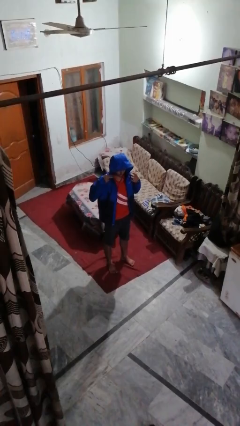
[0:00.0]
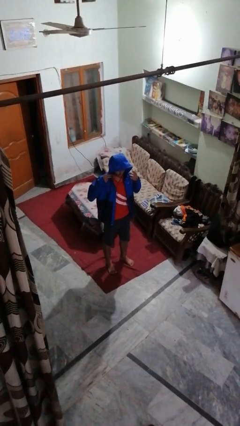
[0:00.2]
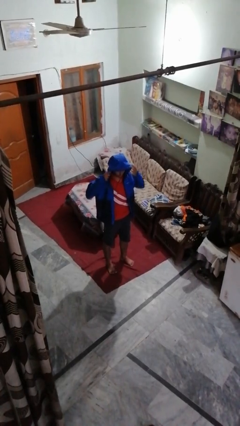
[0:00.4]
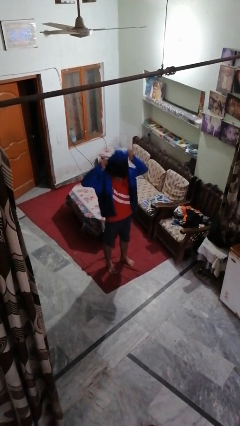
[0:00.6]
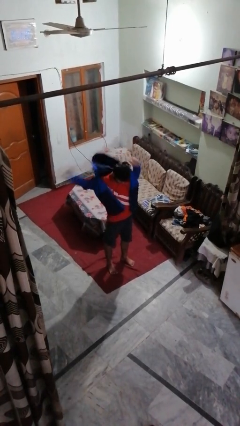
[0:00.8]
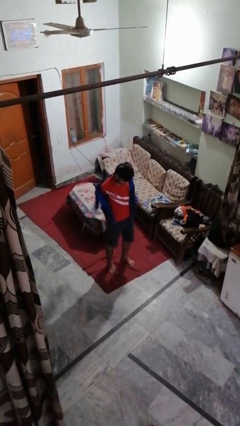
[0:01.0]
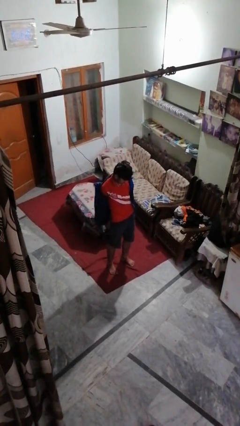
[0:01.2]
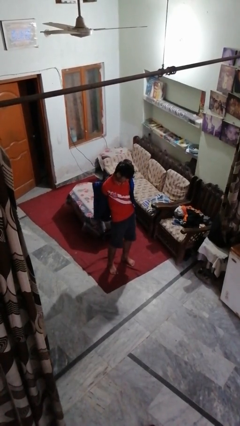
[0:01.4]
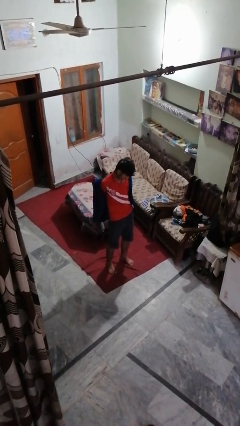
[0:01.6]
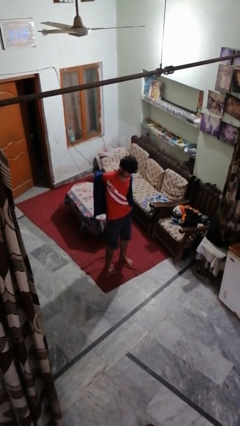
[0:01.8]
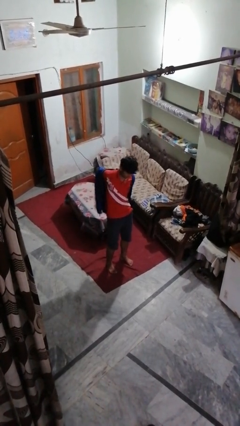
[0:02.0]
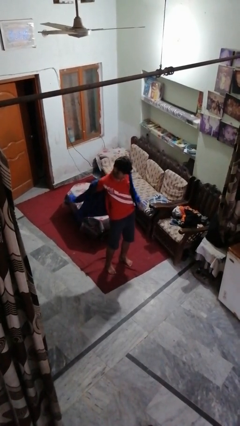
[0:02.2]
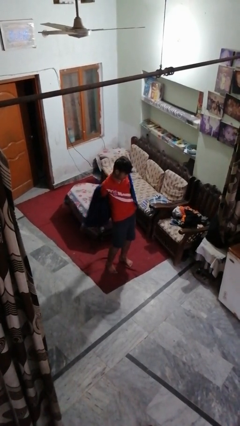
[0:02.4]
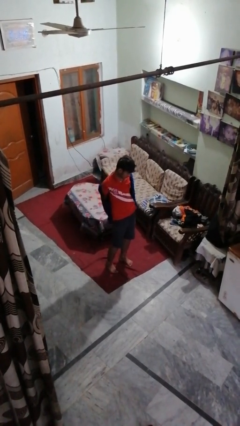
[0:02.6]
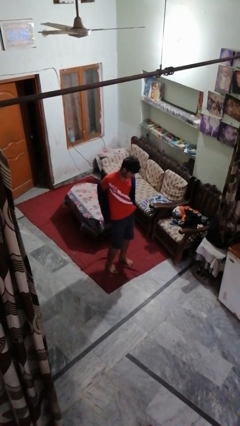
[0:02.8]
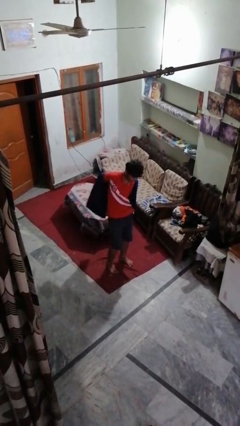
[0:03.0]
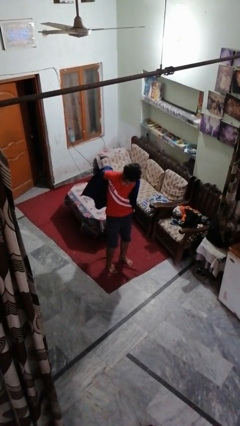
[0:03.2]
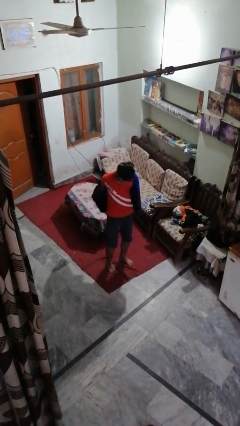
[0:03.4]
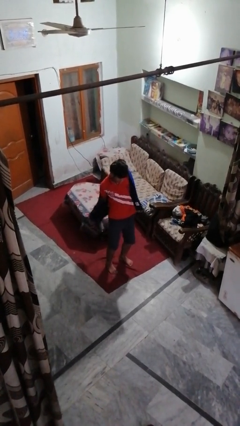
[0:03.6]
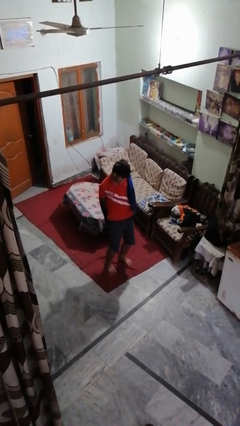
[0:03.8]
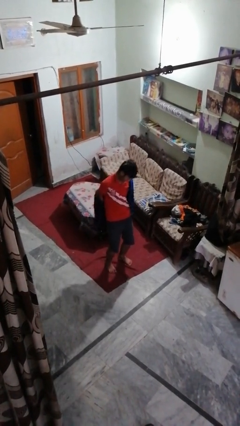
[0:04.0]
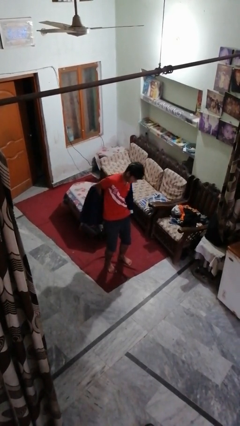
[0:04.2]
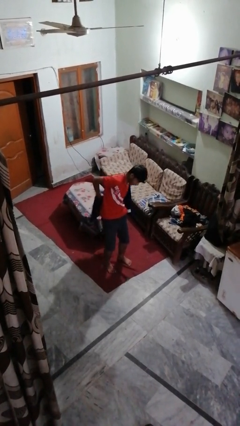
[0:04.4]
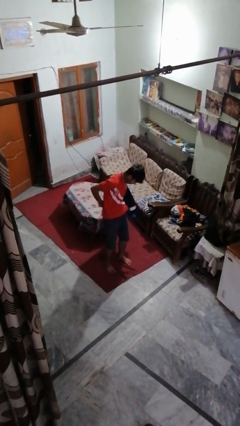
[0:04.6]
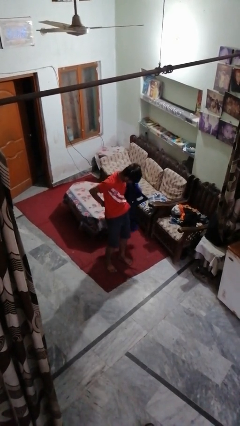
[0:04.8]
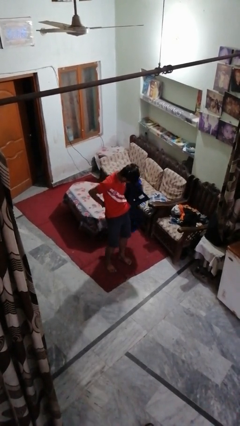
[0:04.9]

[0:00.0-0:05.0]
person takes off hoodie

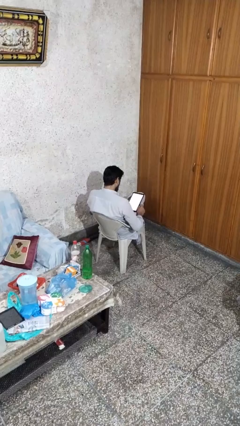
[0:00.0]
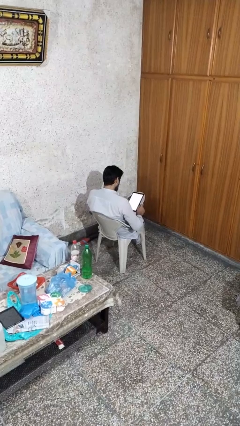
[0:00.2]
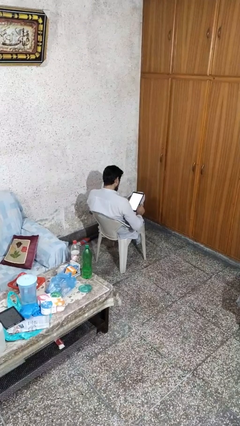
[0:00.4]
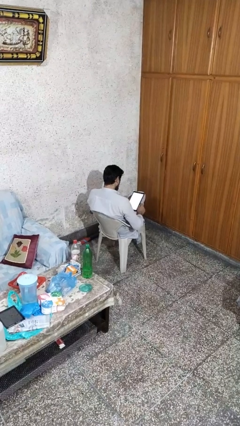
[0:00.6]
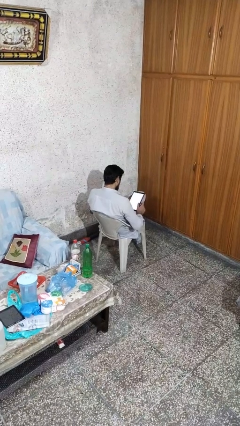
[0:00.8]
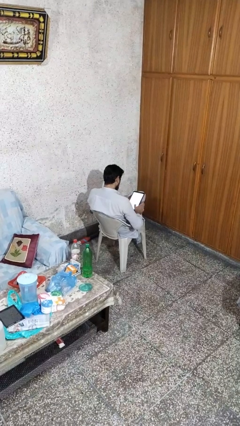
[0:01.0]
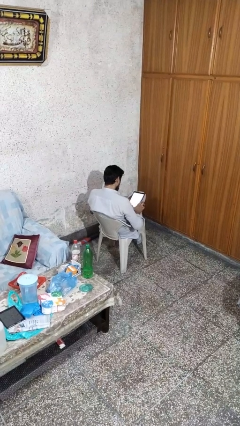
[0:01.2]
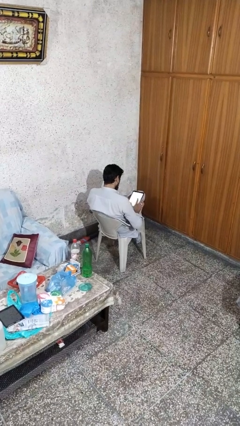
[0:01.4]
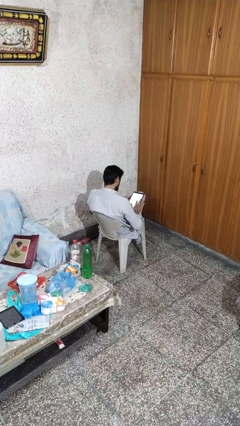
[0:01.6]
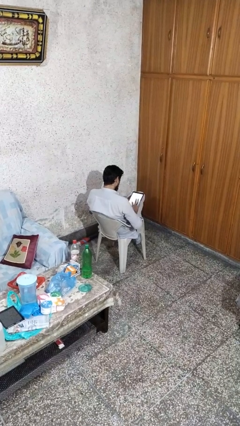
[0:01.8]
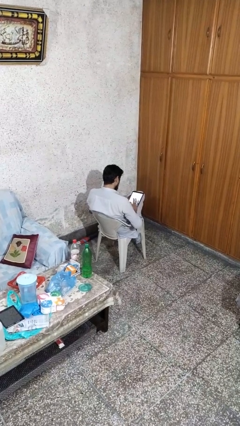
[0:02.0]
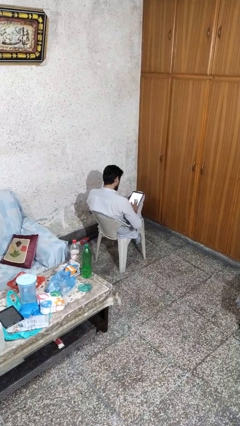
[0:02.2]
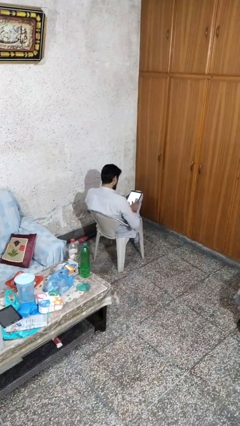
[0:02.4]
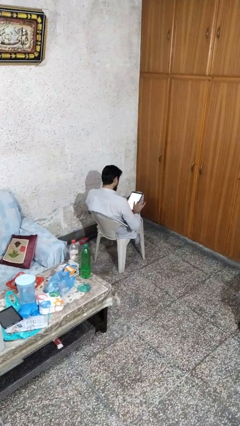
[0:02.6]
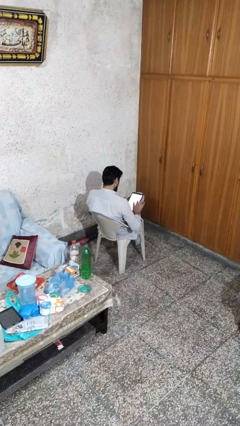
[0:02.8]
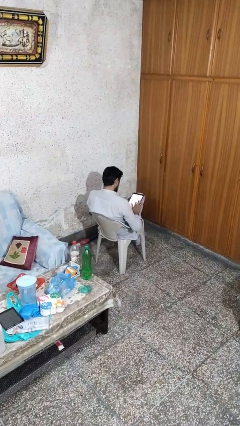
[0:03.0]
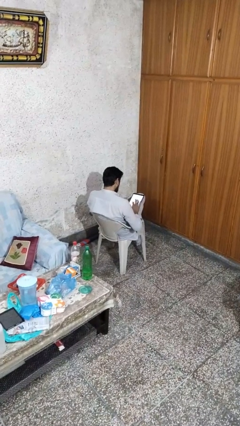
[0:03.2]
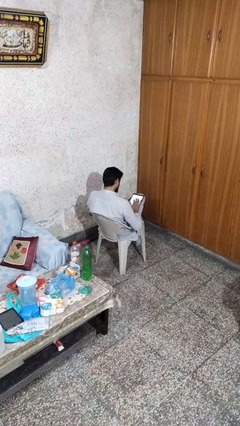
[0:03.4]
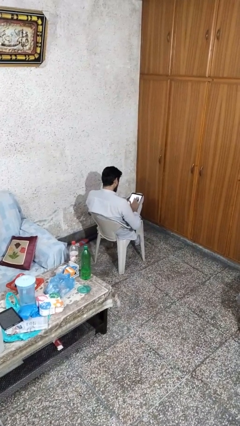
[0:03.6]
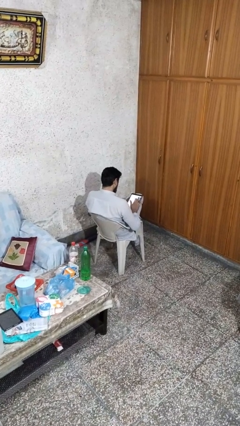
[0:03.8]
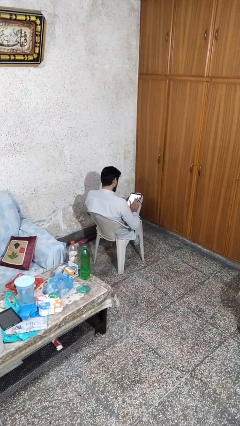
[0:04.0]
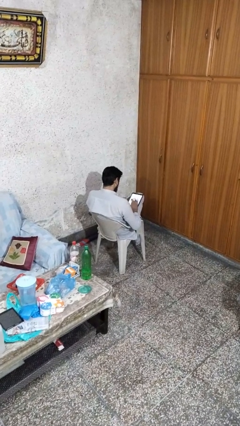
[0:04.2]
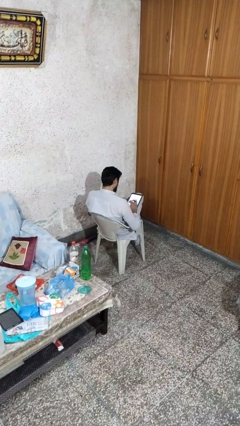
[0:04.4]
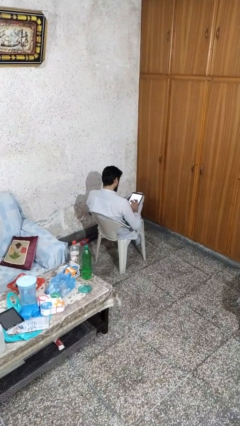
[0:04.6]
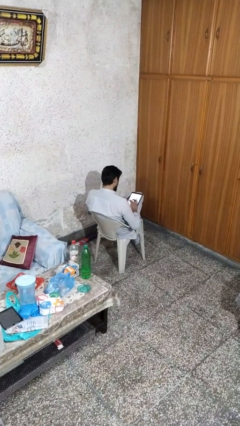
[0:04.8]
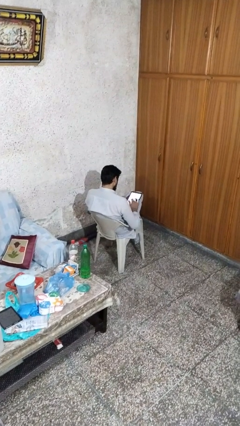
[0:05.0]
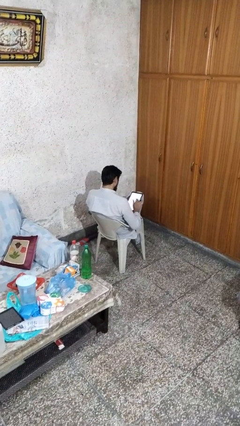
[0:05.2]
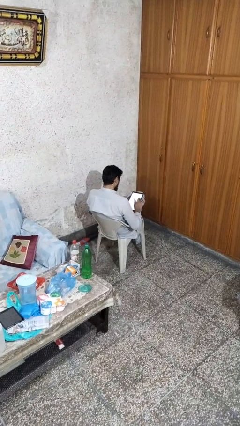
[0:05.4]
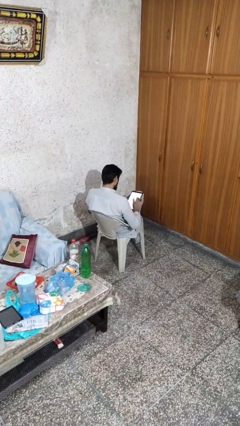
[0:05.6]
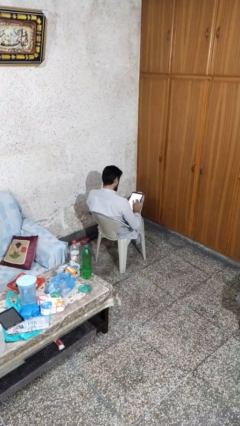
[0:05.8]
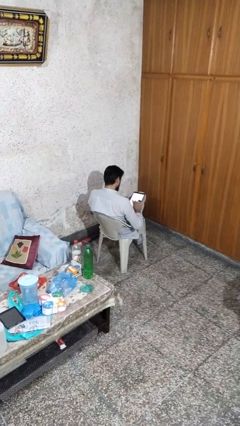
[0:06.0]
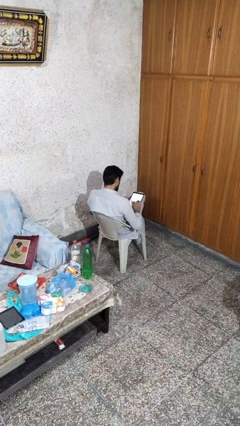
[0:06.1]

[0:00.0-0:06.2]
person interacts with tablet

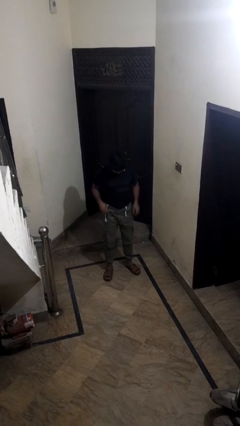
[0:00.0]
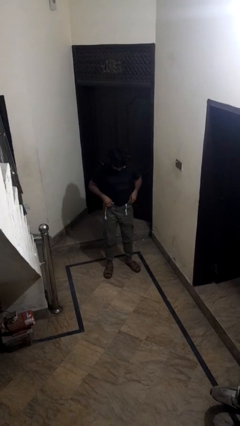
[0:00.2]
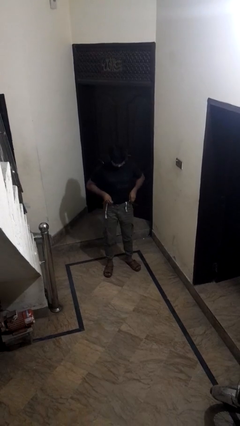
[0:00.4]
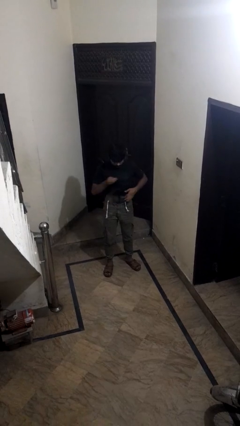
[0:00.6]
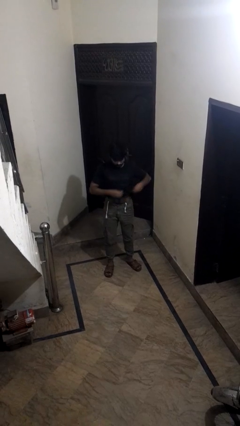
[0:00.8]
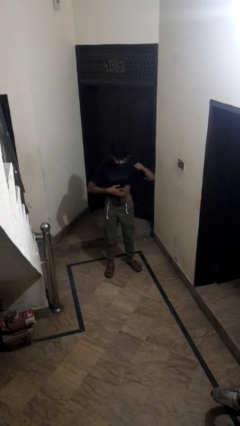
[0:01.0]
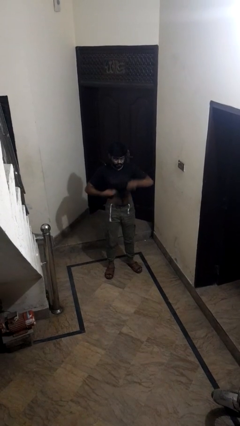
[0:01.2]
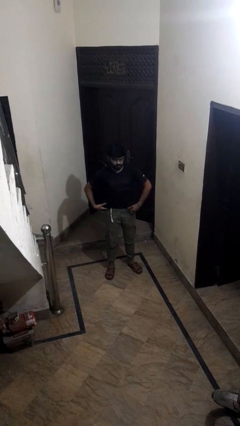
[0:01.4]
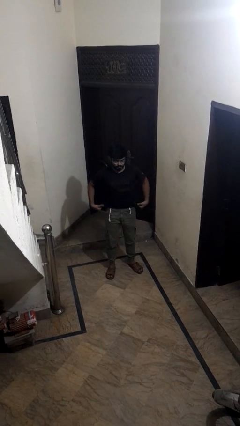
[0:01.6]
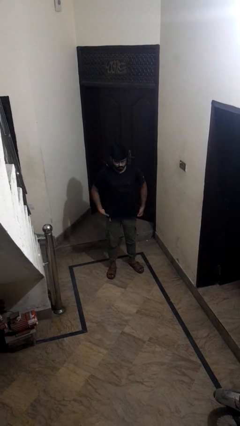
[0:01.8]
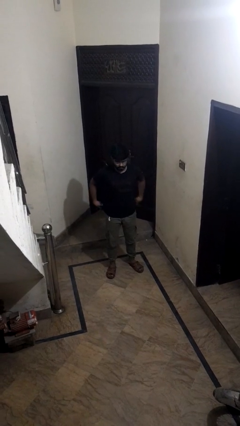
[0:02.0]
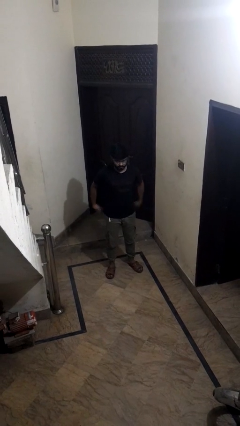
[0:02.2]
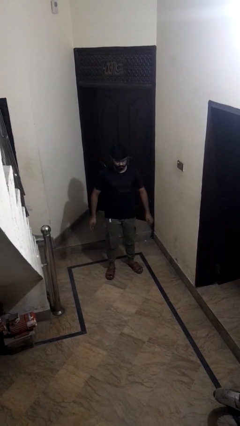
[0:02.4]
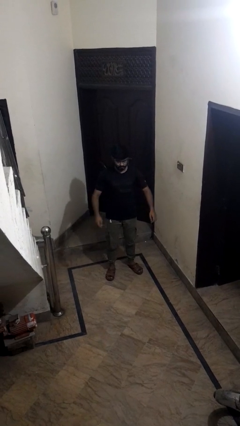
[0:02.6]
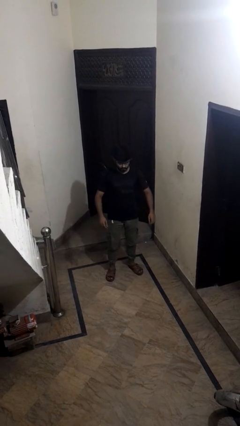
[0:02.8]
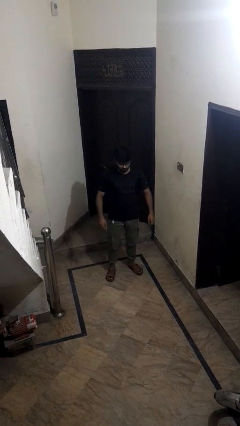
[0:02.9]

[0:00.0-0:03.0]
person untucks shirt

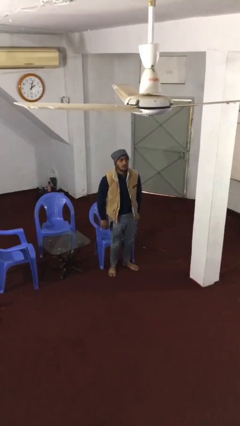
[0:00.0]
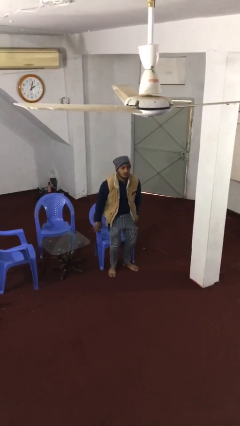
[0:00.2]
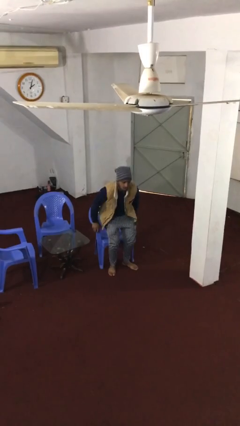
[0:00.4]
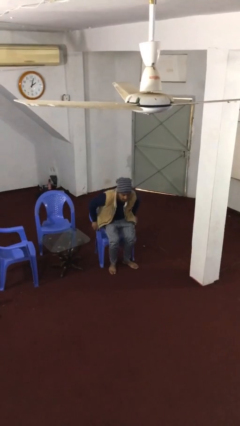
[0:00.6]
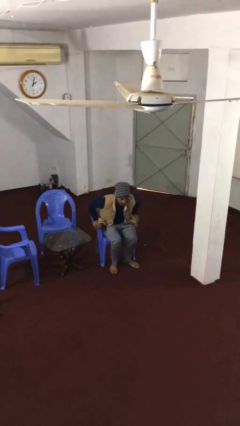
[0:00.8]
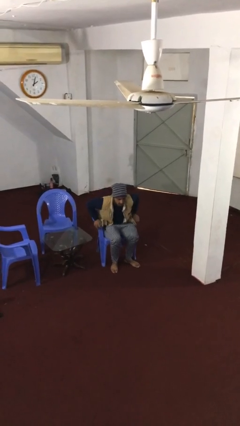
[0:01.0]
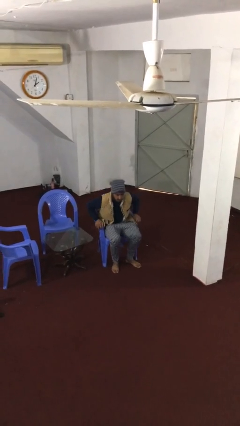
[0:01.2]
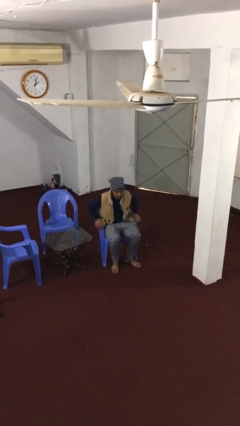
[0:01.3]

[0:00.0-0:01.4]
person sits down

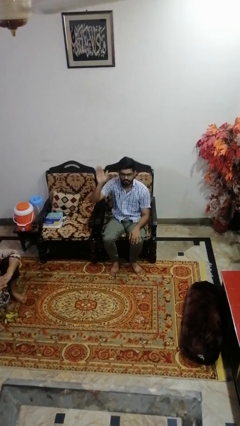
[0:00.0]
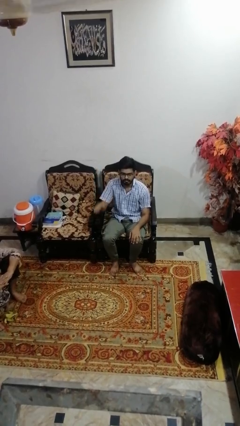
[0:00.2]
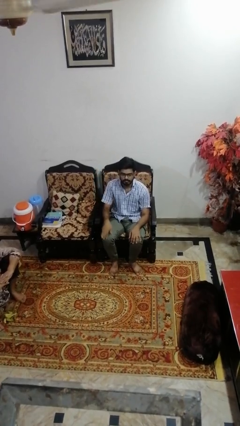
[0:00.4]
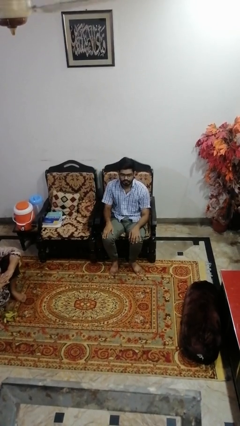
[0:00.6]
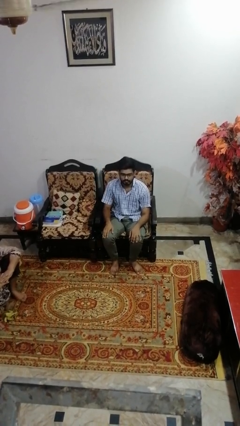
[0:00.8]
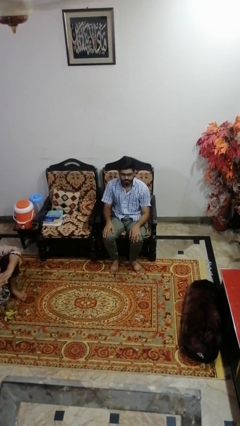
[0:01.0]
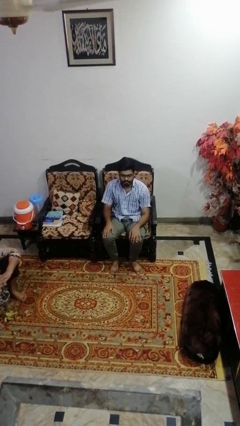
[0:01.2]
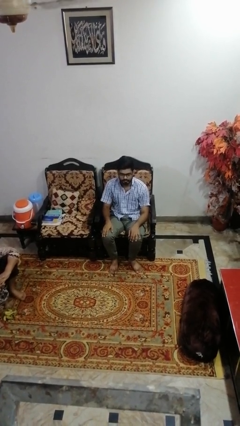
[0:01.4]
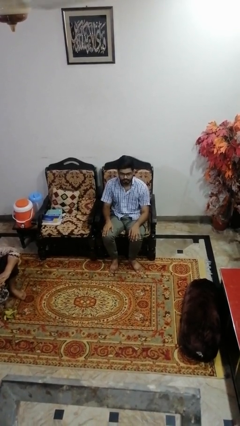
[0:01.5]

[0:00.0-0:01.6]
person gestures lower hand

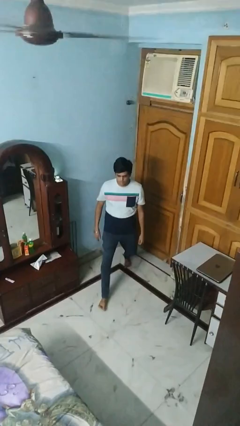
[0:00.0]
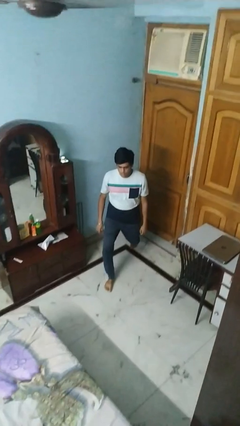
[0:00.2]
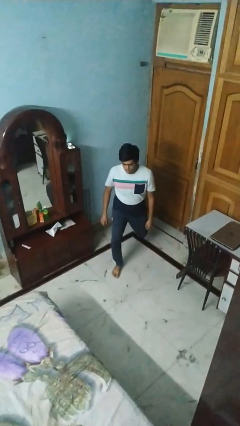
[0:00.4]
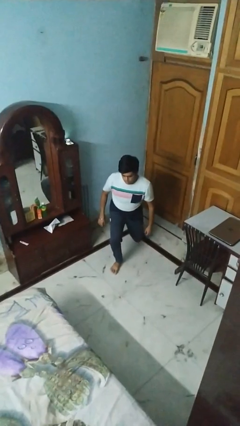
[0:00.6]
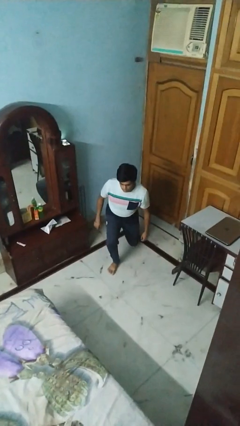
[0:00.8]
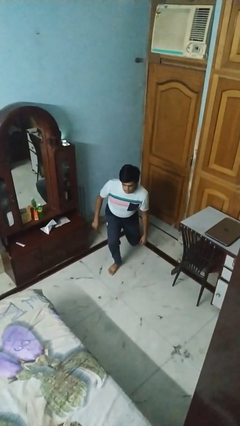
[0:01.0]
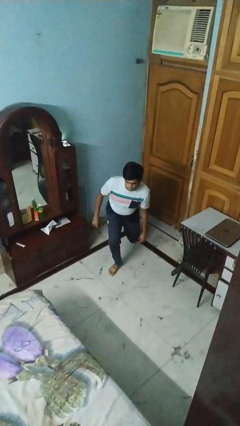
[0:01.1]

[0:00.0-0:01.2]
person exercises with lunges
